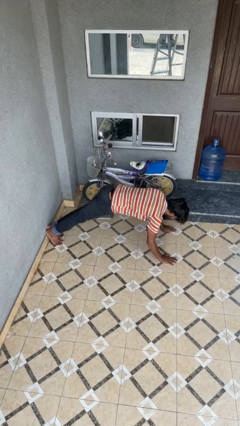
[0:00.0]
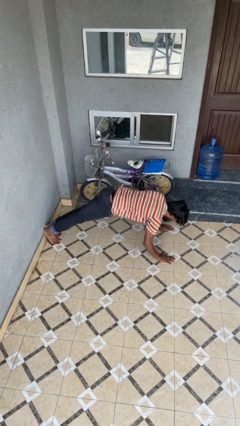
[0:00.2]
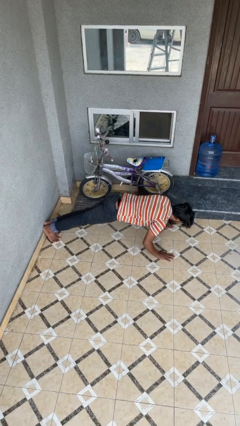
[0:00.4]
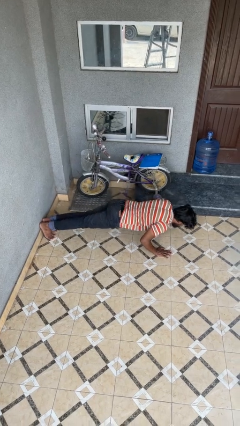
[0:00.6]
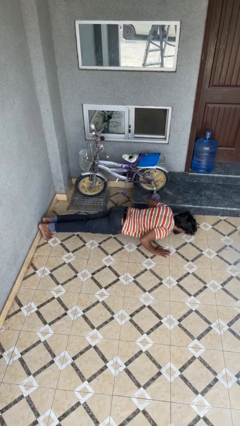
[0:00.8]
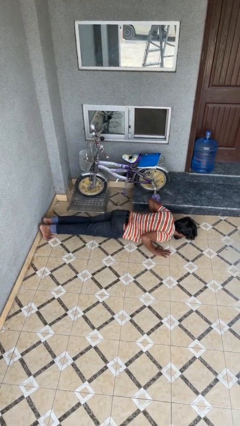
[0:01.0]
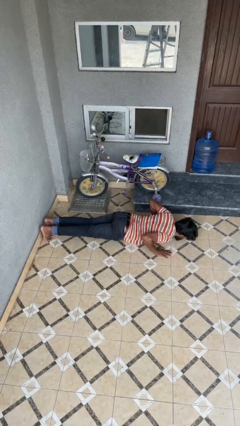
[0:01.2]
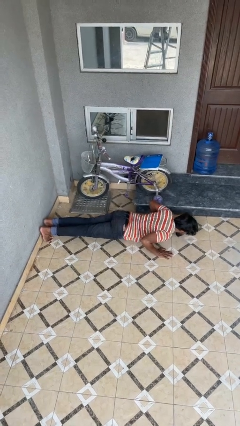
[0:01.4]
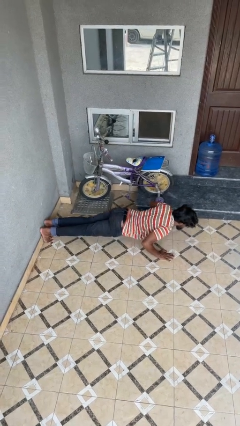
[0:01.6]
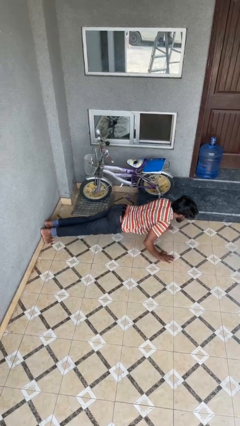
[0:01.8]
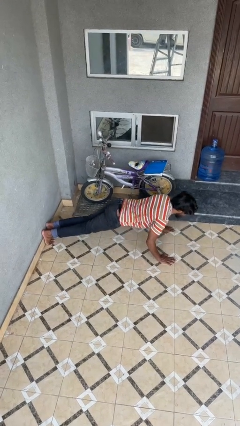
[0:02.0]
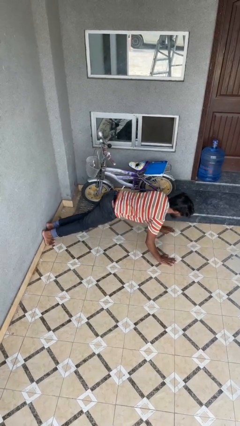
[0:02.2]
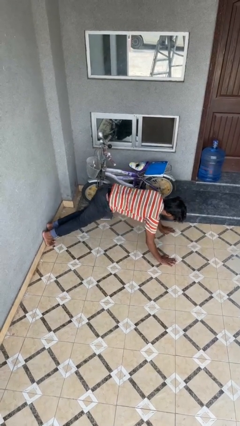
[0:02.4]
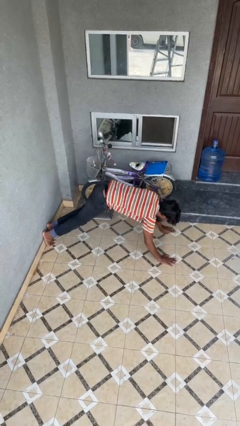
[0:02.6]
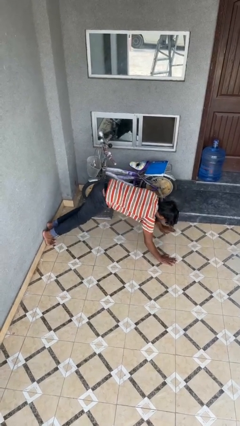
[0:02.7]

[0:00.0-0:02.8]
person exercises with pushup

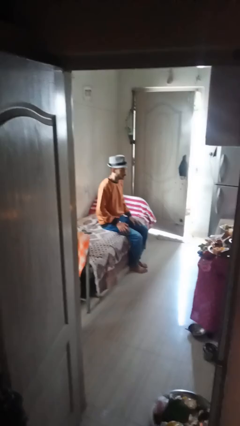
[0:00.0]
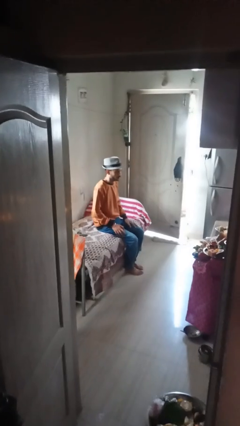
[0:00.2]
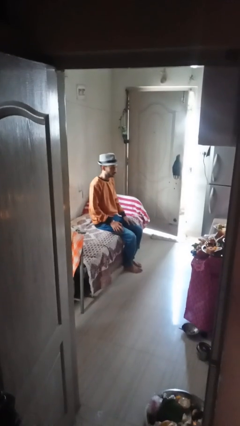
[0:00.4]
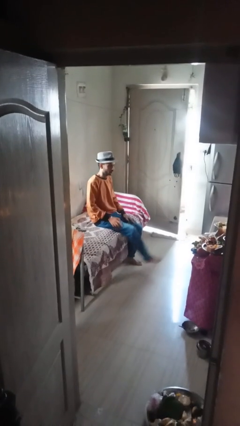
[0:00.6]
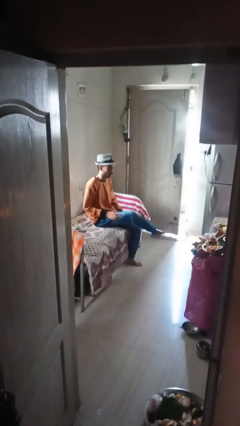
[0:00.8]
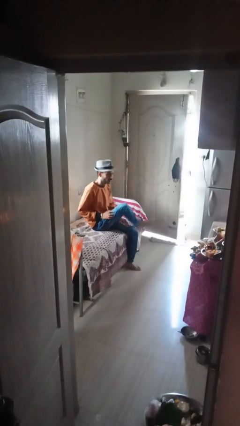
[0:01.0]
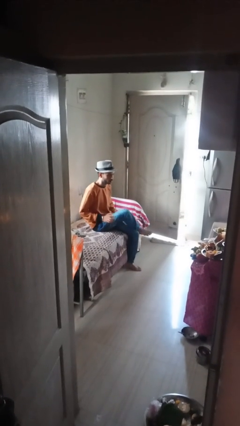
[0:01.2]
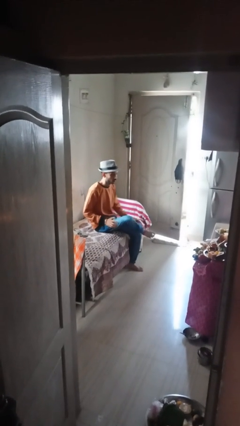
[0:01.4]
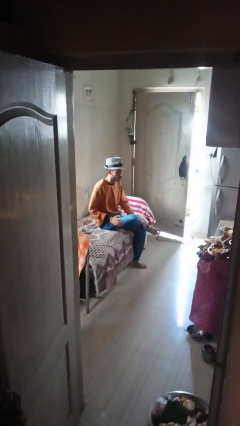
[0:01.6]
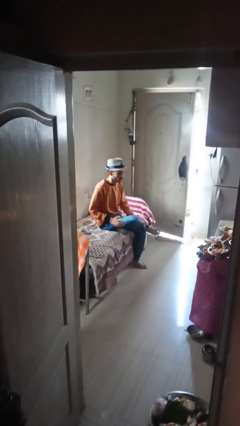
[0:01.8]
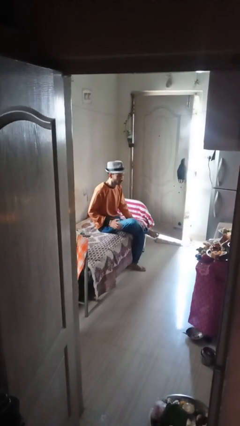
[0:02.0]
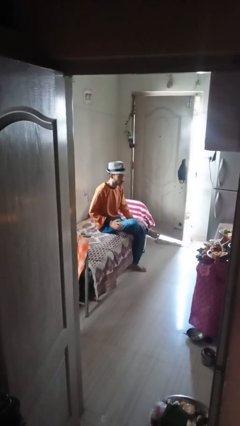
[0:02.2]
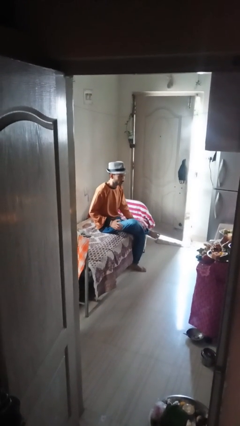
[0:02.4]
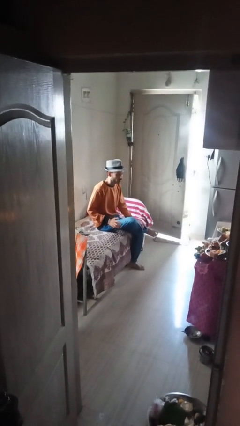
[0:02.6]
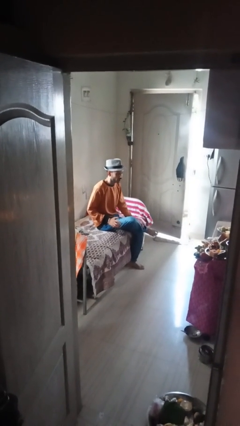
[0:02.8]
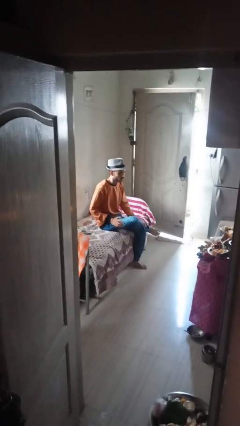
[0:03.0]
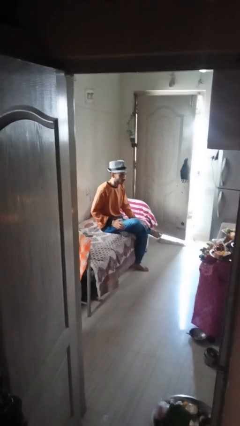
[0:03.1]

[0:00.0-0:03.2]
person crosses legs

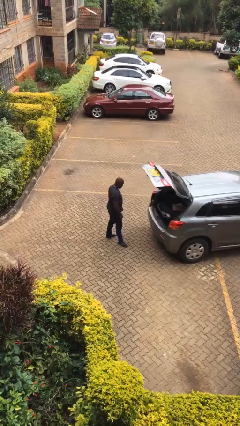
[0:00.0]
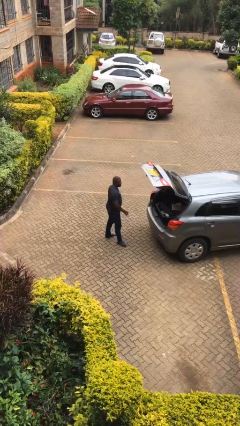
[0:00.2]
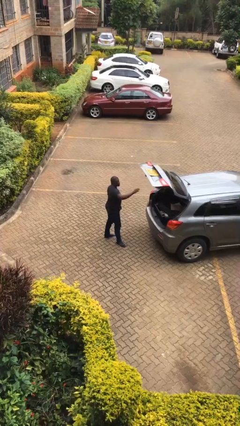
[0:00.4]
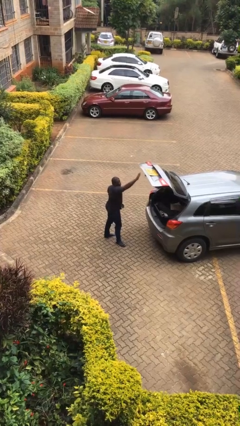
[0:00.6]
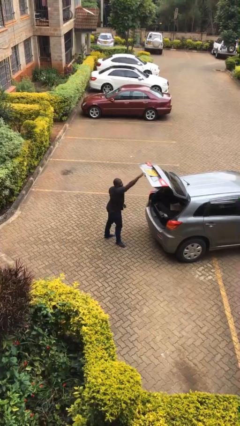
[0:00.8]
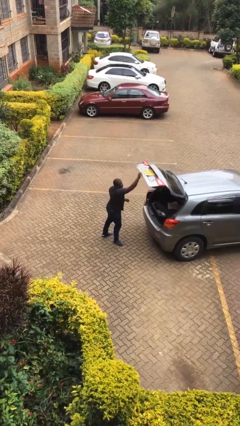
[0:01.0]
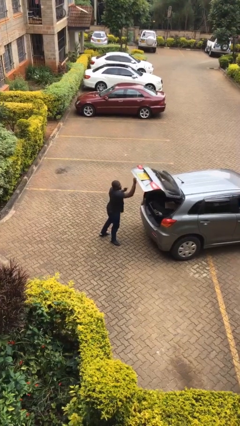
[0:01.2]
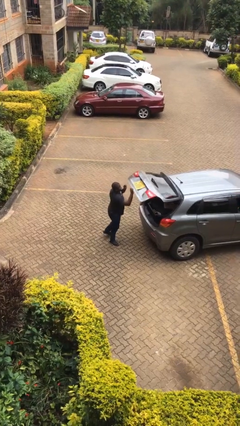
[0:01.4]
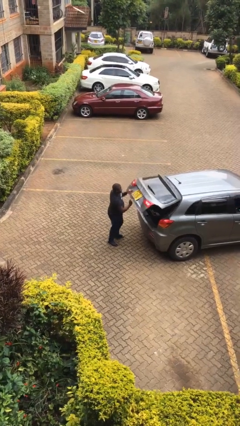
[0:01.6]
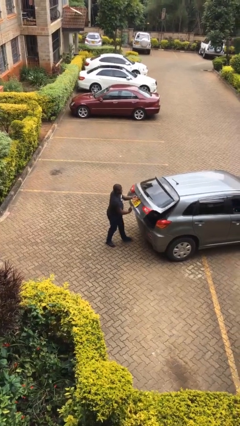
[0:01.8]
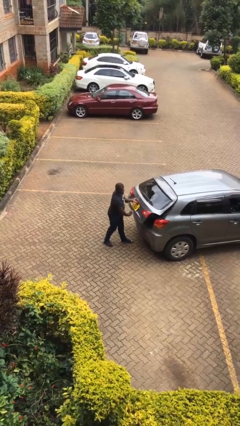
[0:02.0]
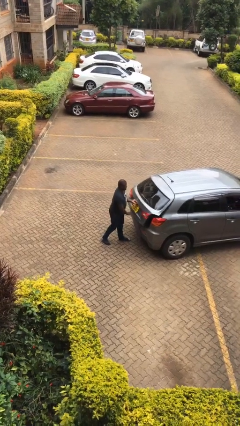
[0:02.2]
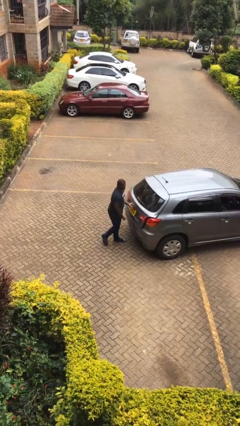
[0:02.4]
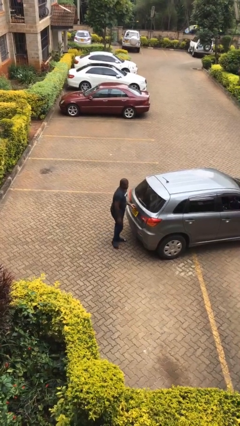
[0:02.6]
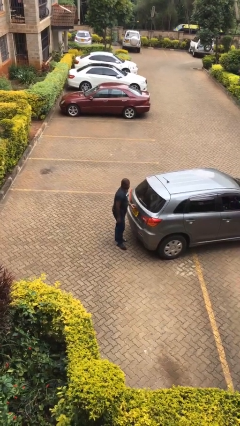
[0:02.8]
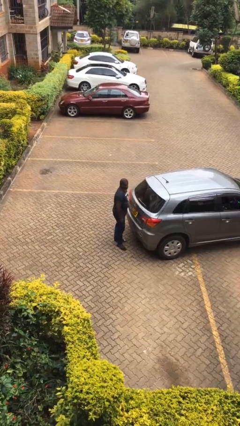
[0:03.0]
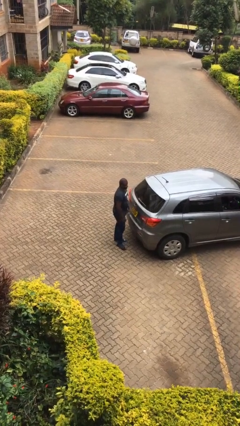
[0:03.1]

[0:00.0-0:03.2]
person closes car trunk

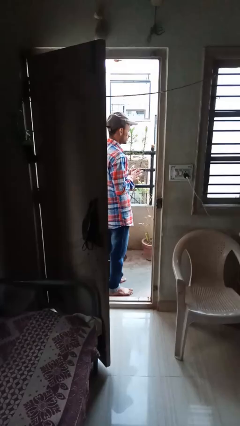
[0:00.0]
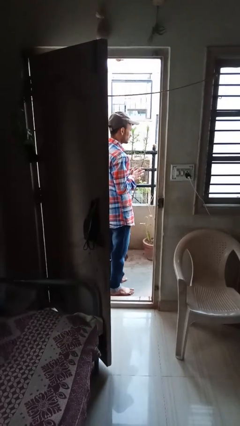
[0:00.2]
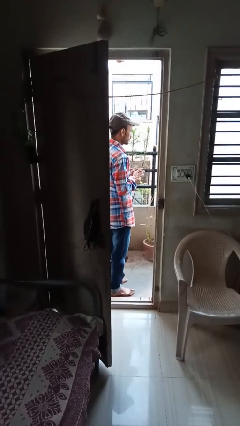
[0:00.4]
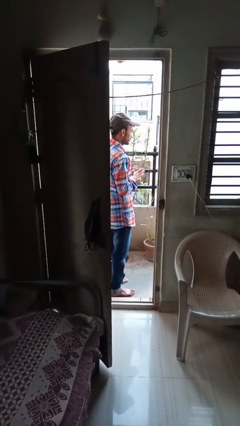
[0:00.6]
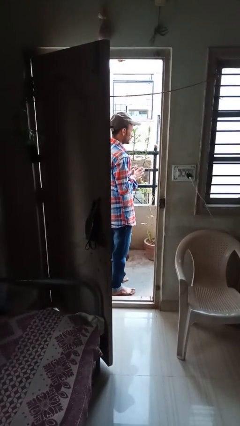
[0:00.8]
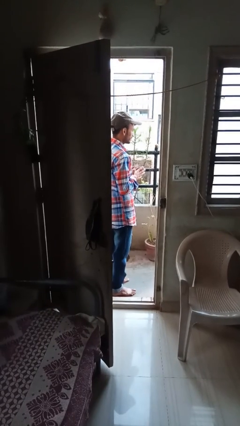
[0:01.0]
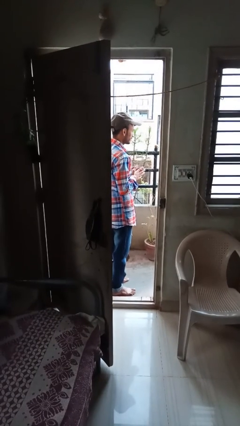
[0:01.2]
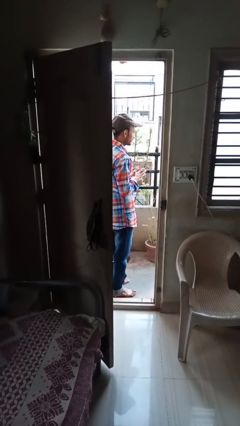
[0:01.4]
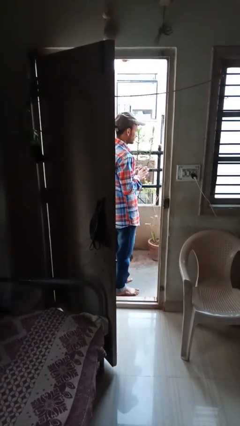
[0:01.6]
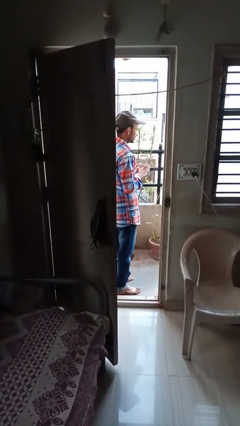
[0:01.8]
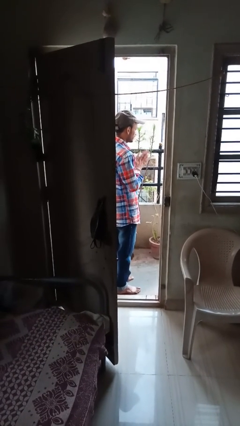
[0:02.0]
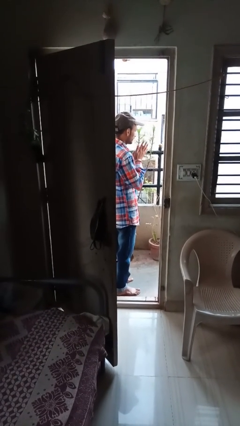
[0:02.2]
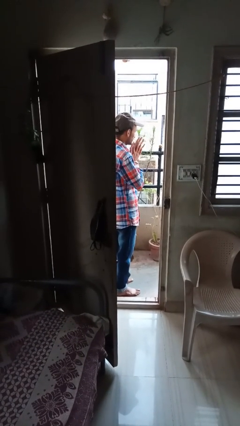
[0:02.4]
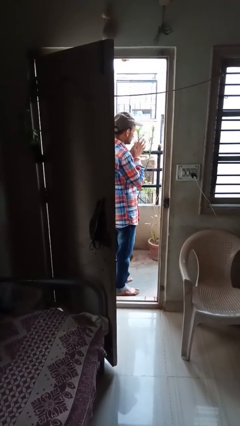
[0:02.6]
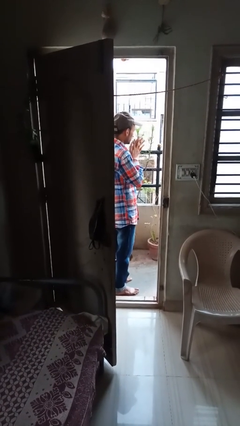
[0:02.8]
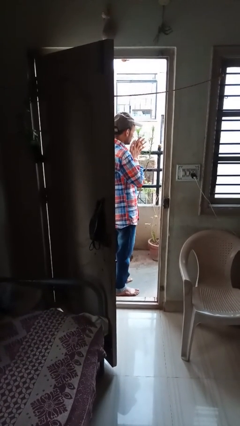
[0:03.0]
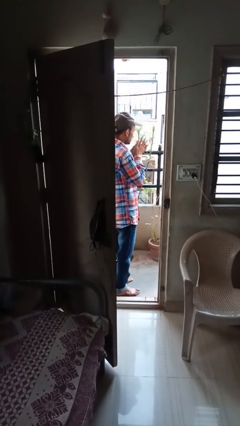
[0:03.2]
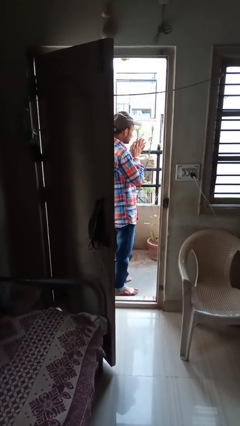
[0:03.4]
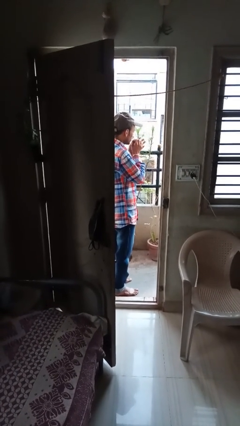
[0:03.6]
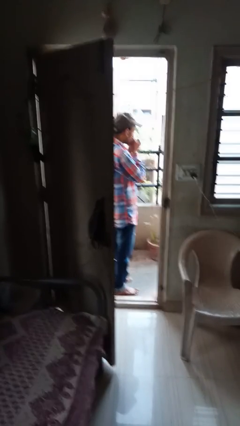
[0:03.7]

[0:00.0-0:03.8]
person blows into hands

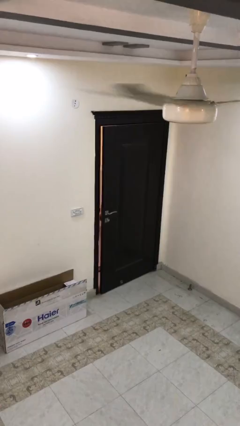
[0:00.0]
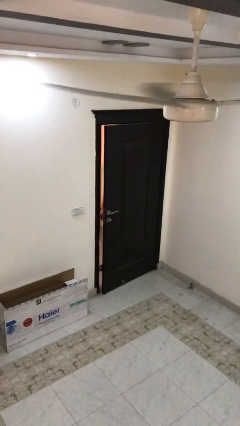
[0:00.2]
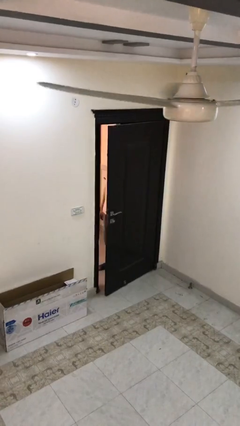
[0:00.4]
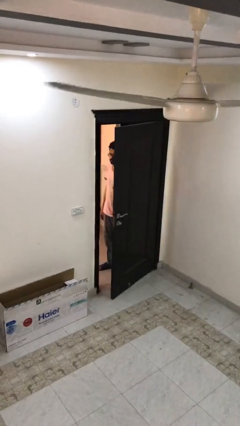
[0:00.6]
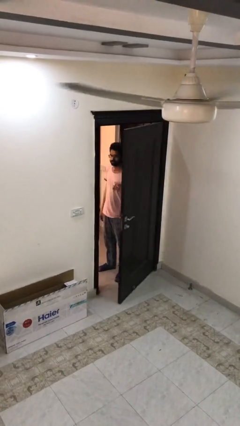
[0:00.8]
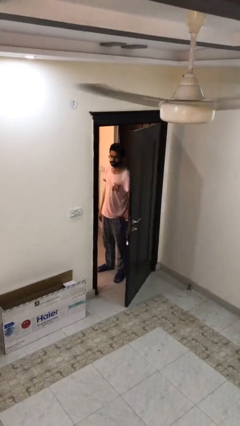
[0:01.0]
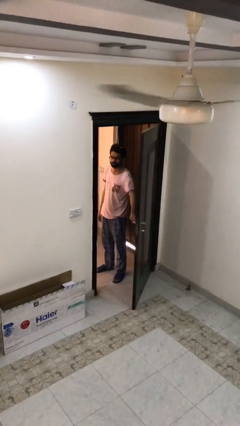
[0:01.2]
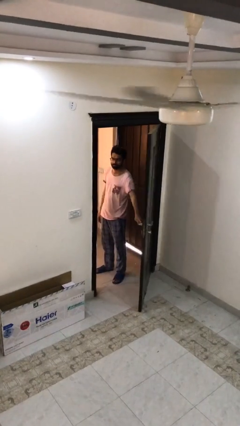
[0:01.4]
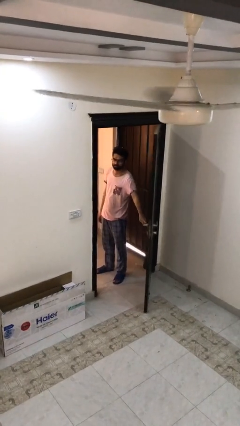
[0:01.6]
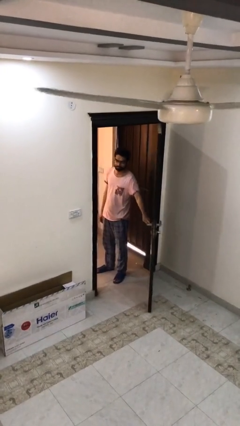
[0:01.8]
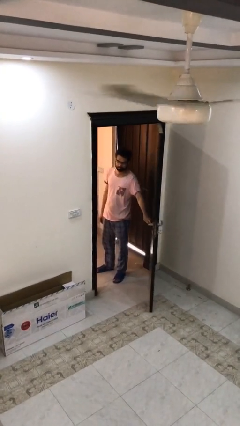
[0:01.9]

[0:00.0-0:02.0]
person opens facility door

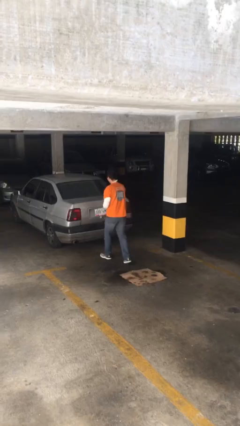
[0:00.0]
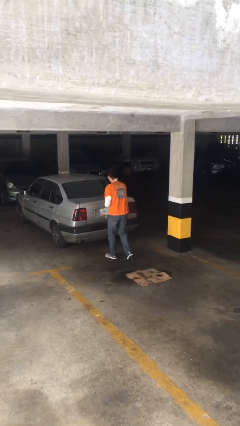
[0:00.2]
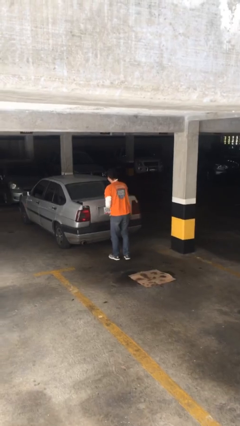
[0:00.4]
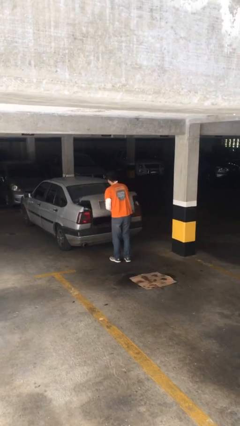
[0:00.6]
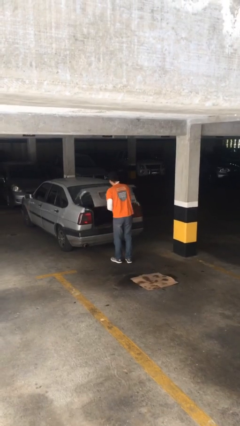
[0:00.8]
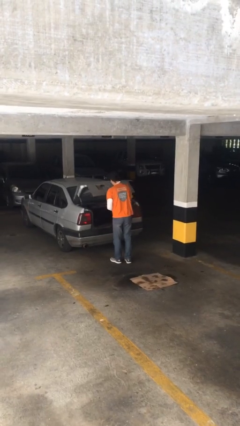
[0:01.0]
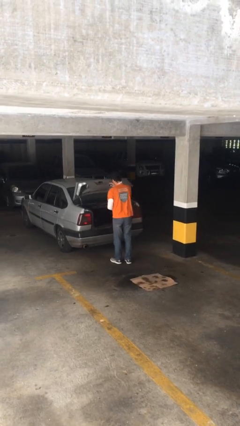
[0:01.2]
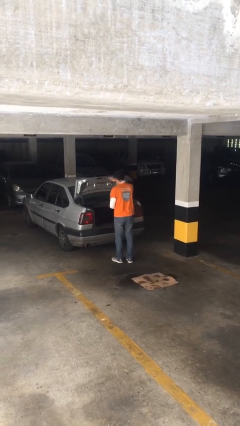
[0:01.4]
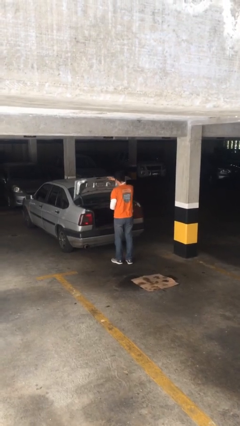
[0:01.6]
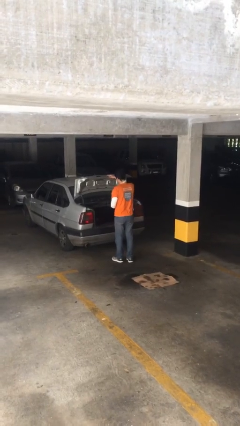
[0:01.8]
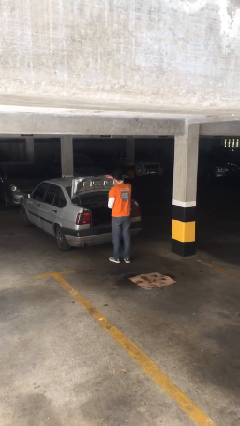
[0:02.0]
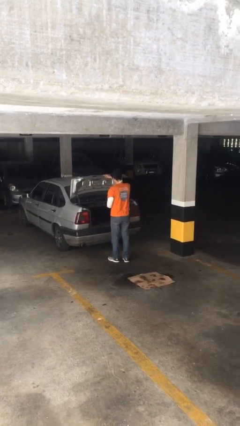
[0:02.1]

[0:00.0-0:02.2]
person opens car trunk

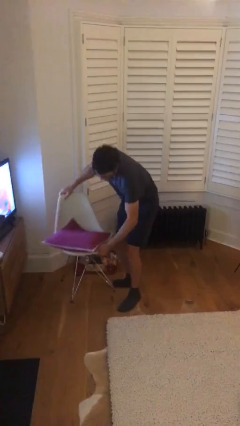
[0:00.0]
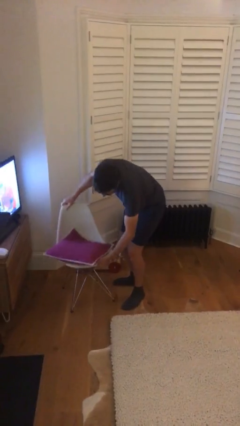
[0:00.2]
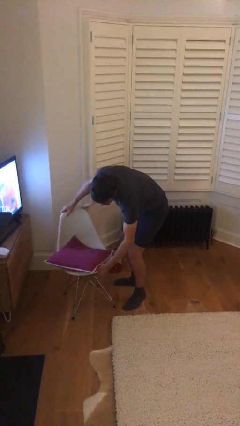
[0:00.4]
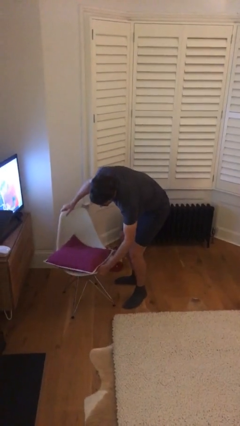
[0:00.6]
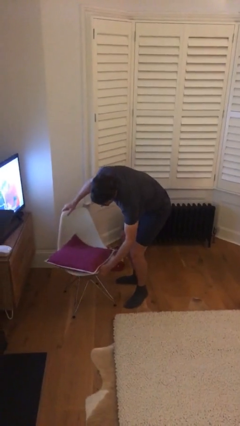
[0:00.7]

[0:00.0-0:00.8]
person puts down object on floor
